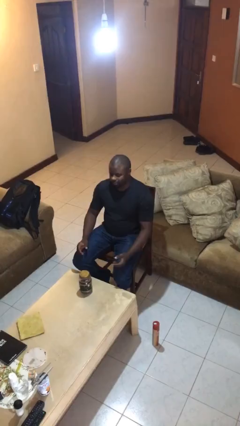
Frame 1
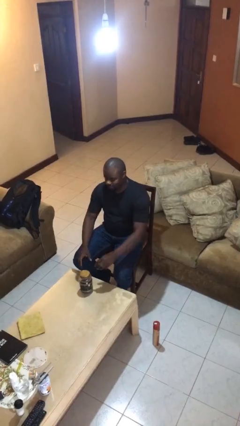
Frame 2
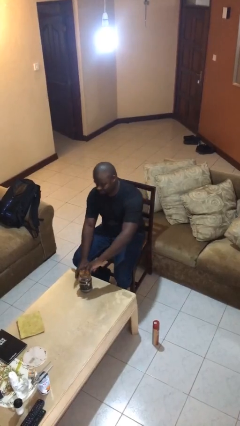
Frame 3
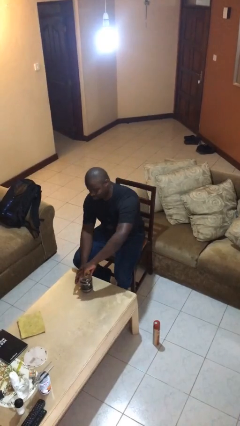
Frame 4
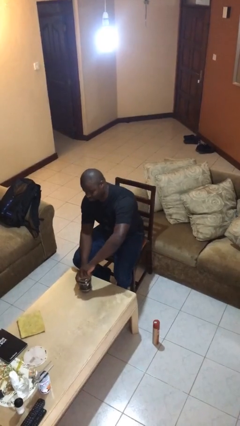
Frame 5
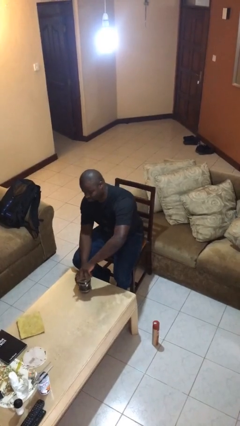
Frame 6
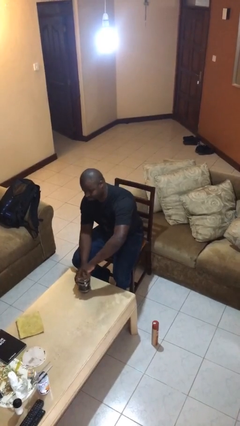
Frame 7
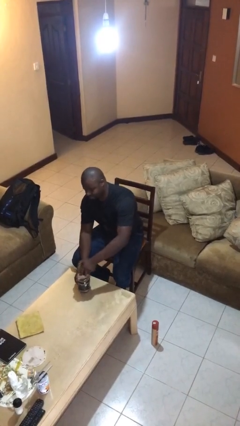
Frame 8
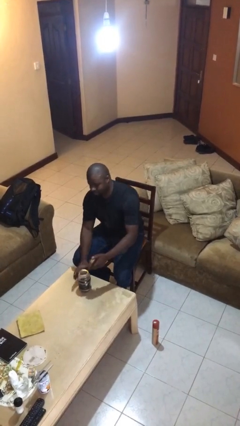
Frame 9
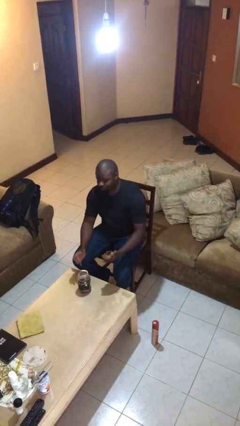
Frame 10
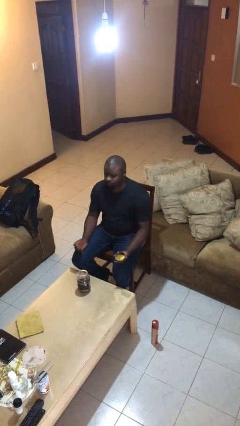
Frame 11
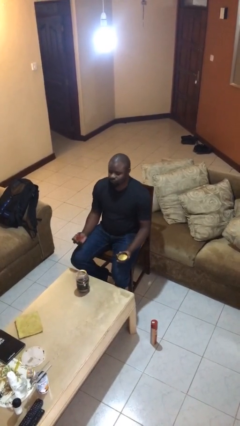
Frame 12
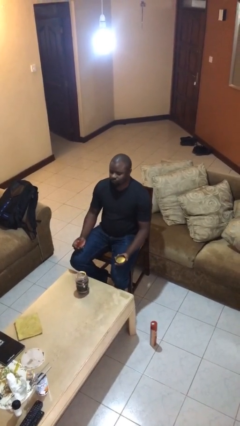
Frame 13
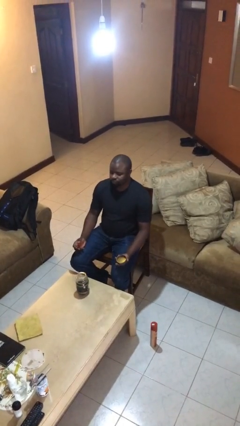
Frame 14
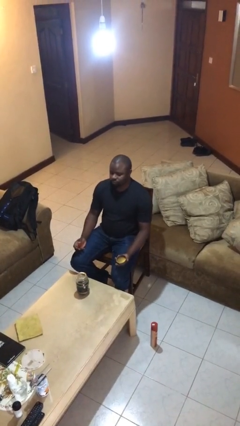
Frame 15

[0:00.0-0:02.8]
person opens jar

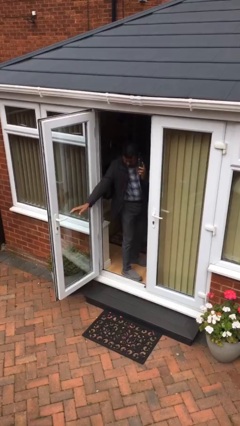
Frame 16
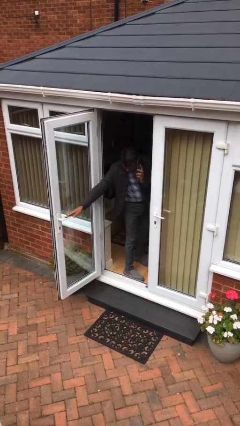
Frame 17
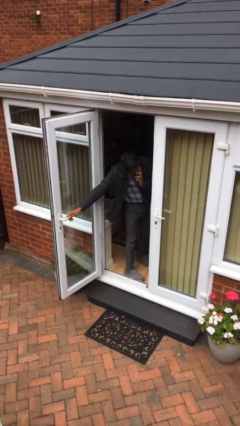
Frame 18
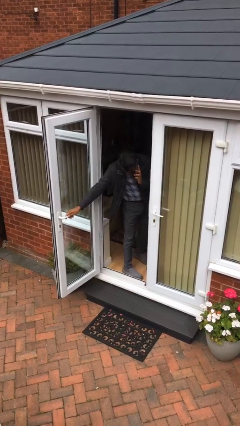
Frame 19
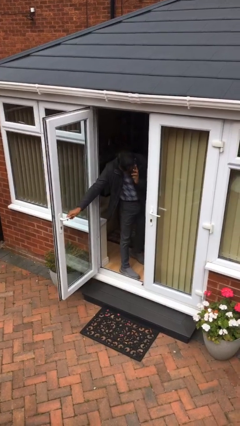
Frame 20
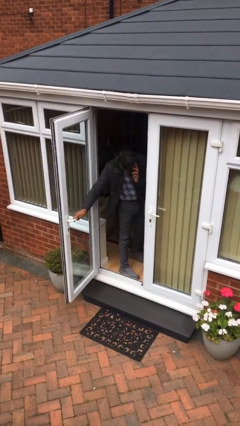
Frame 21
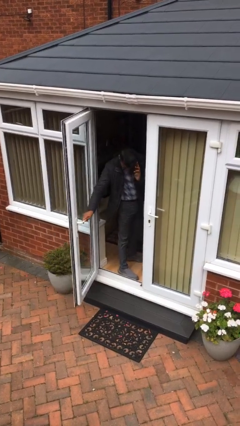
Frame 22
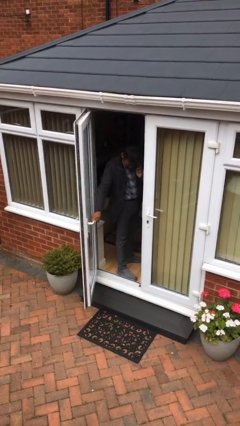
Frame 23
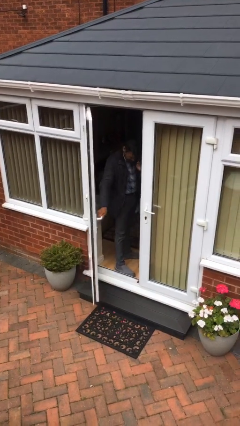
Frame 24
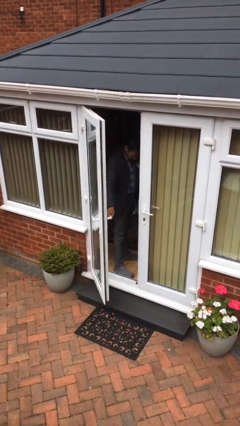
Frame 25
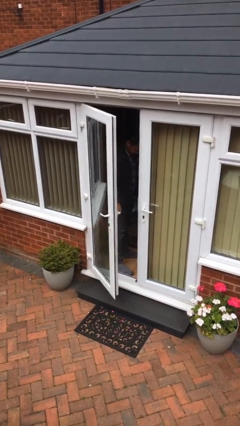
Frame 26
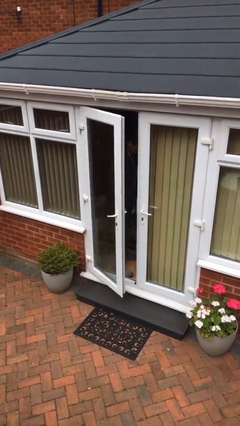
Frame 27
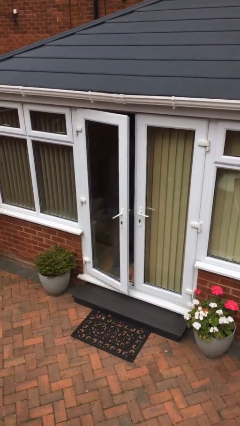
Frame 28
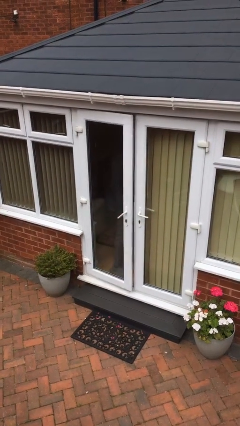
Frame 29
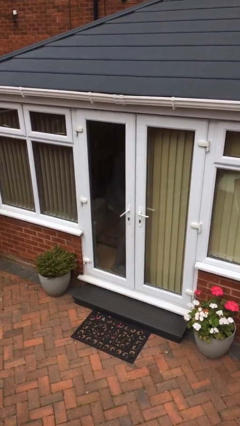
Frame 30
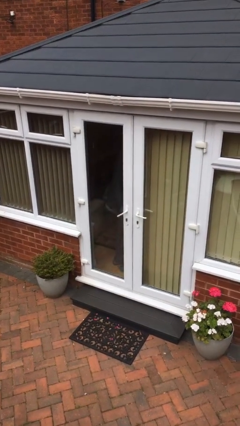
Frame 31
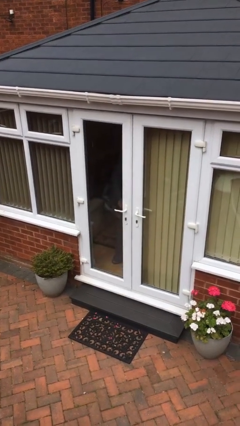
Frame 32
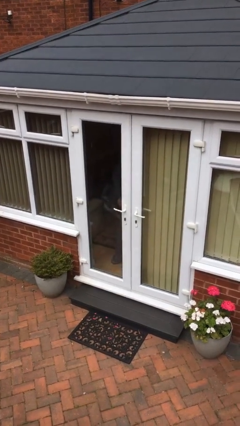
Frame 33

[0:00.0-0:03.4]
person closes facility door

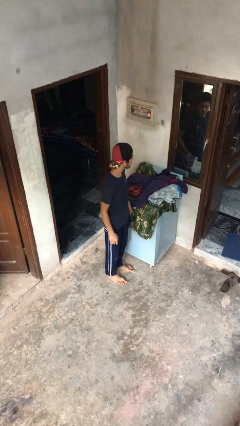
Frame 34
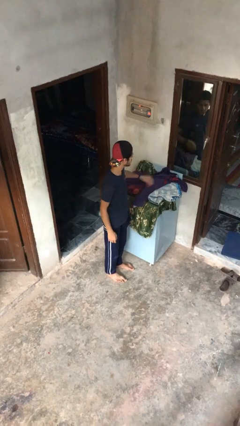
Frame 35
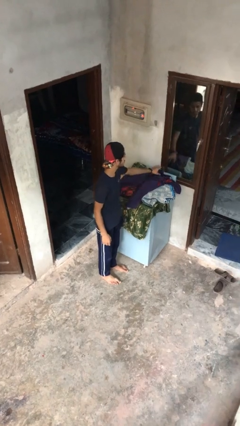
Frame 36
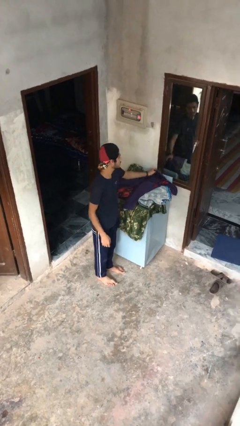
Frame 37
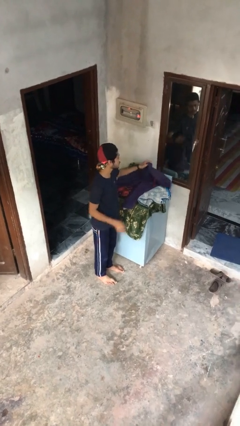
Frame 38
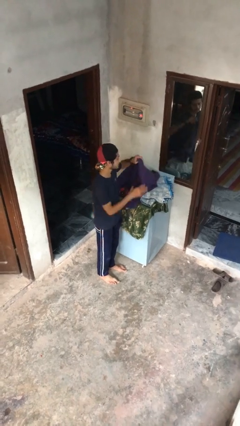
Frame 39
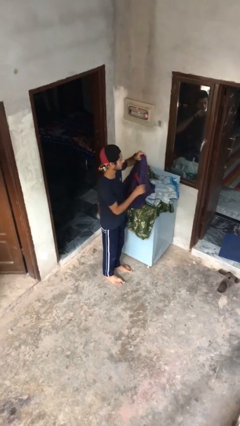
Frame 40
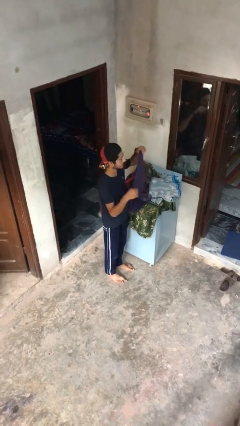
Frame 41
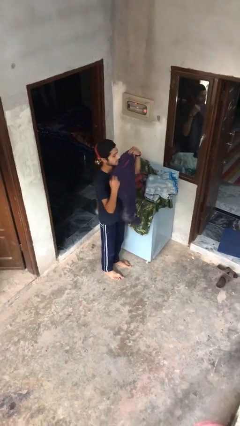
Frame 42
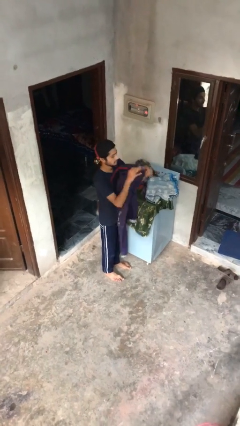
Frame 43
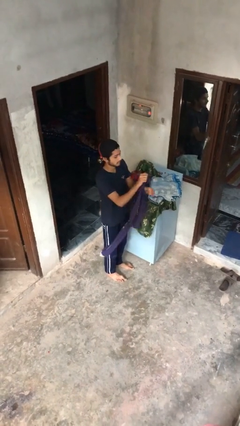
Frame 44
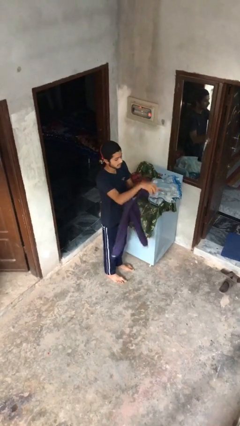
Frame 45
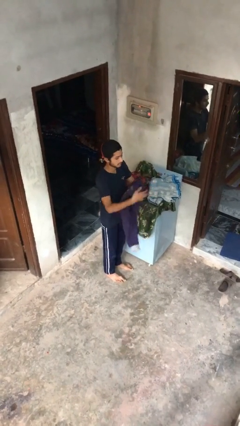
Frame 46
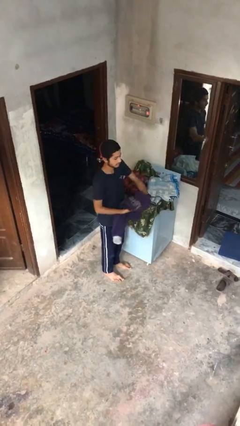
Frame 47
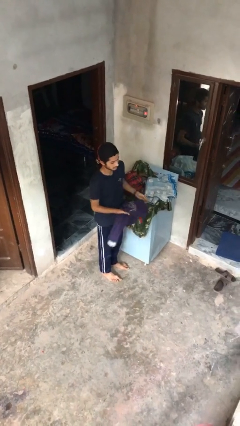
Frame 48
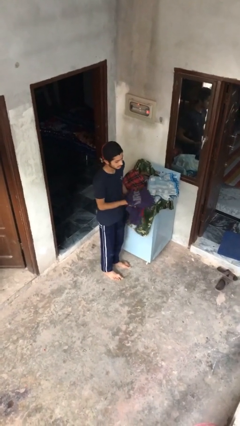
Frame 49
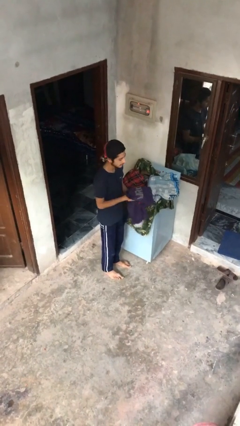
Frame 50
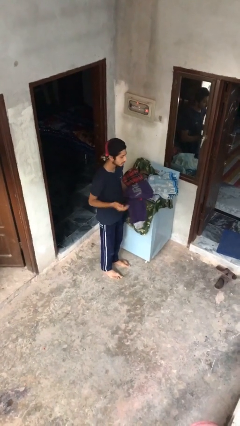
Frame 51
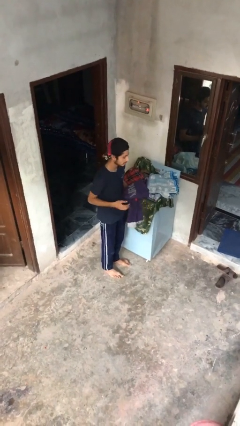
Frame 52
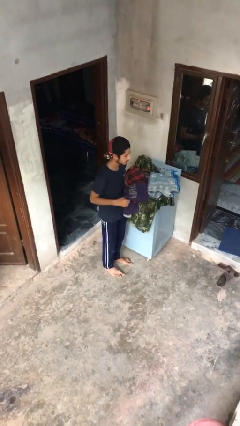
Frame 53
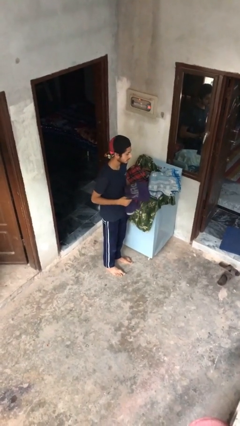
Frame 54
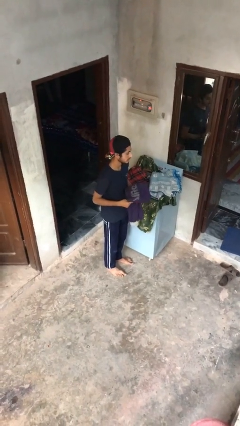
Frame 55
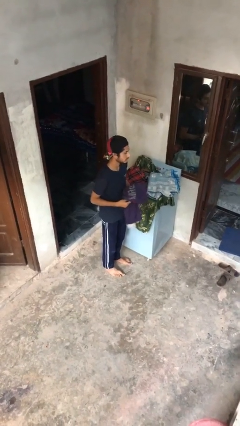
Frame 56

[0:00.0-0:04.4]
person folds pants

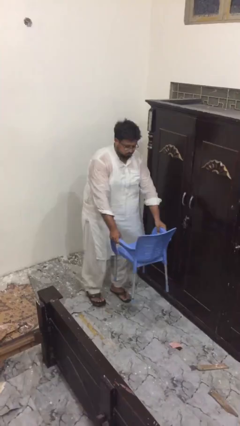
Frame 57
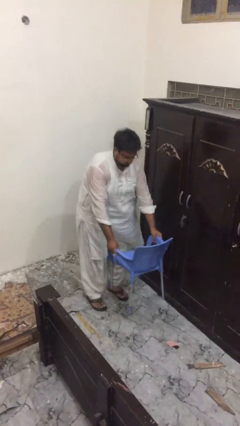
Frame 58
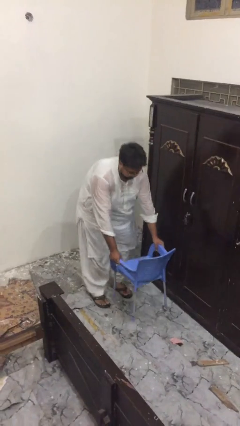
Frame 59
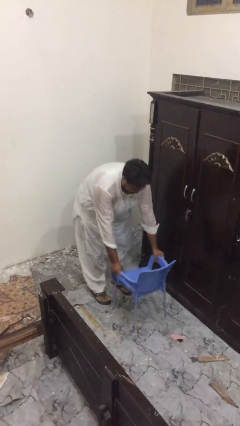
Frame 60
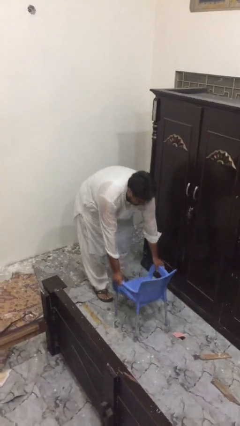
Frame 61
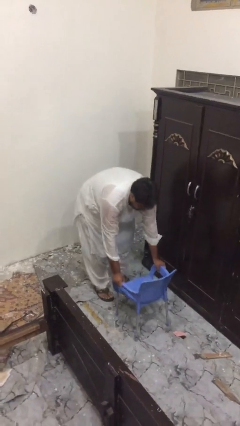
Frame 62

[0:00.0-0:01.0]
person puts down object on floor

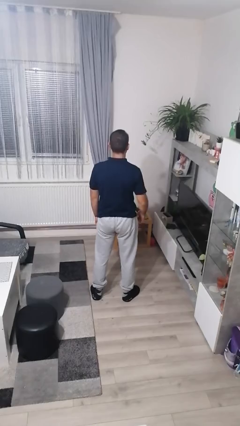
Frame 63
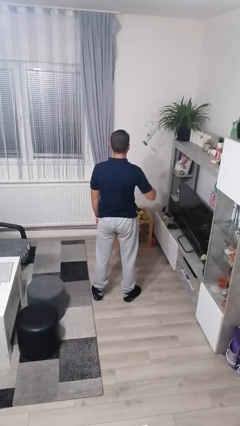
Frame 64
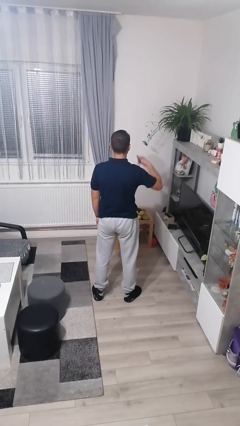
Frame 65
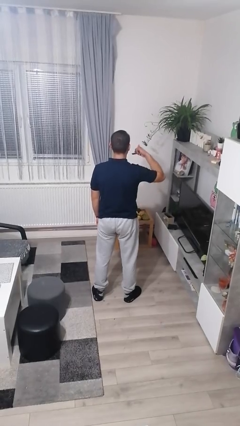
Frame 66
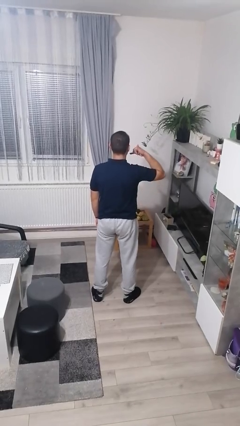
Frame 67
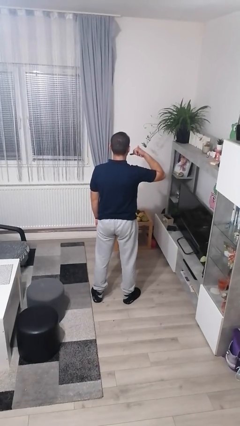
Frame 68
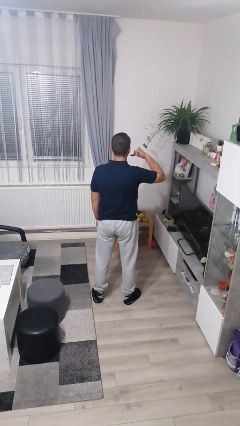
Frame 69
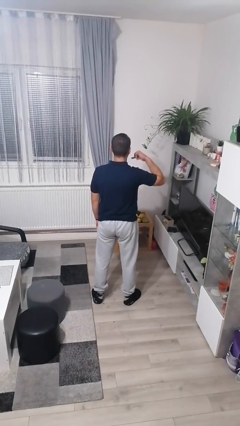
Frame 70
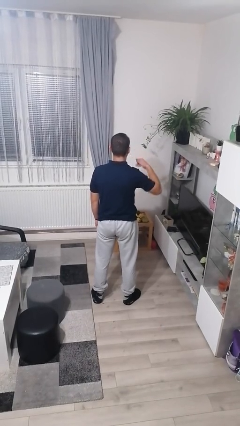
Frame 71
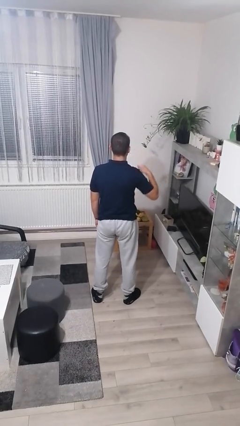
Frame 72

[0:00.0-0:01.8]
person gestures call me

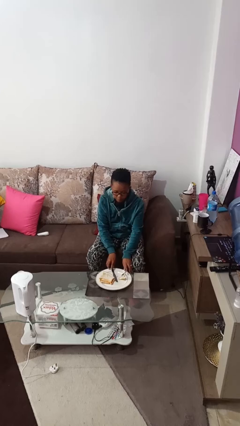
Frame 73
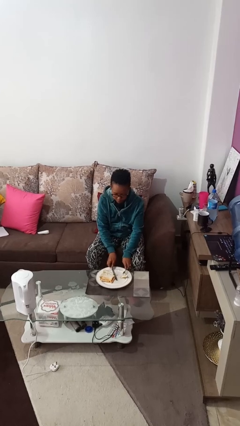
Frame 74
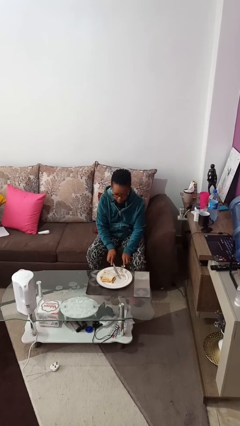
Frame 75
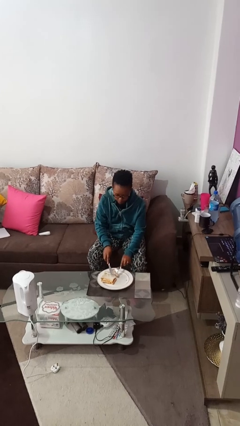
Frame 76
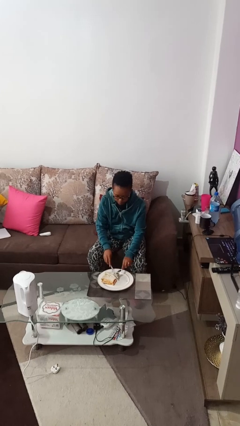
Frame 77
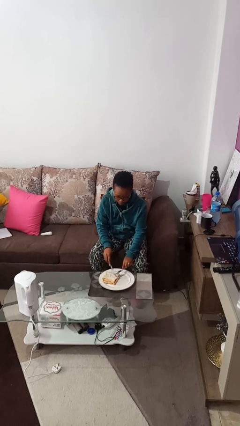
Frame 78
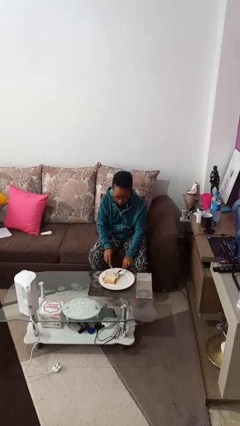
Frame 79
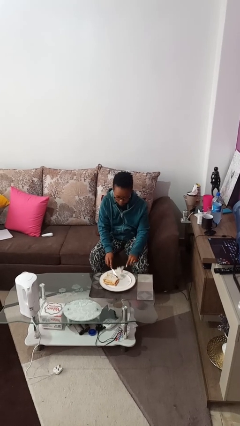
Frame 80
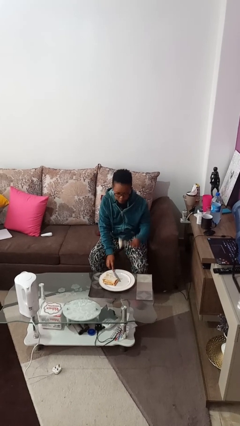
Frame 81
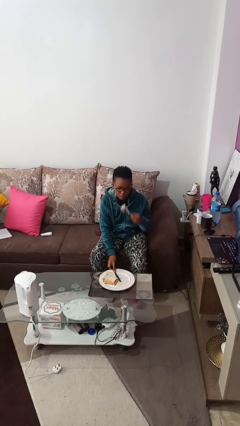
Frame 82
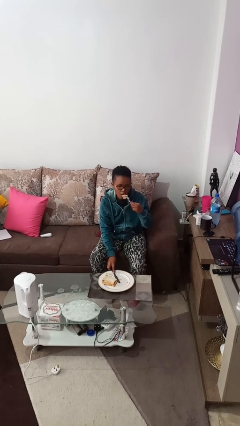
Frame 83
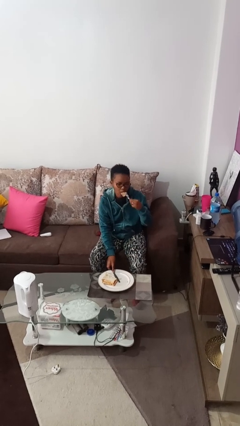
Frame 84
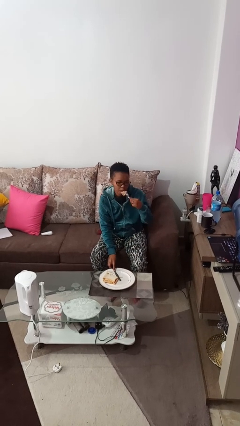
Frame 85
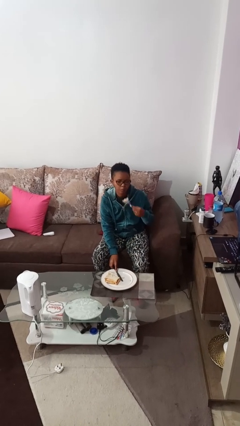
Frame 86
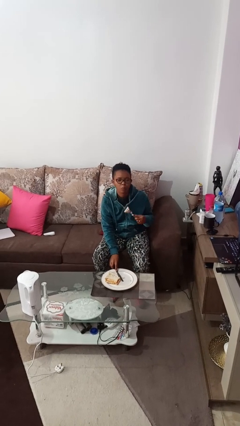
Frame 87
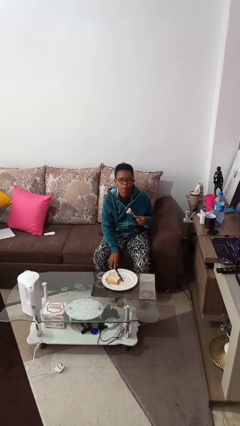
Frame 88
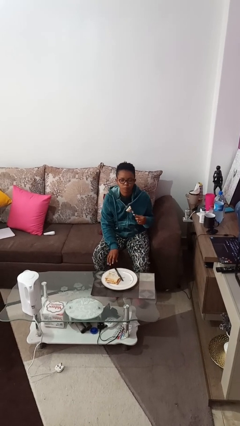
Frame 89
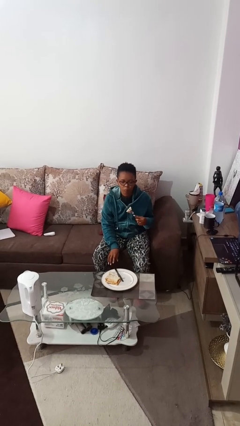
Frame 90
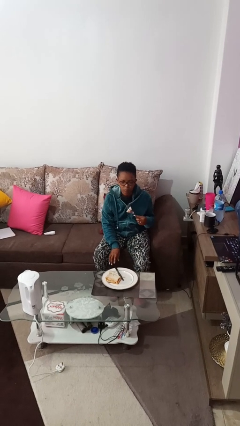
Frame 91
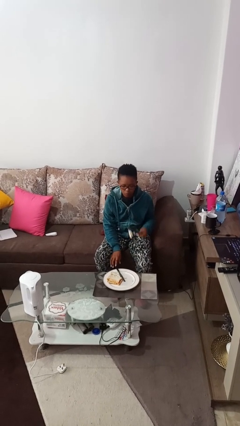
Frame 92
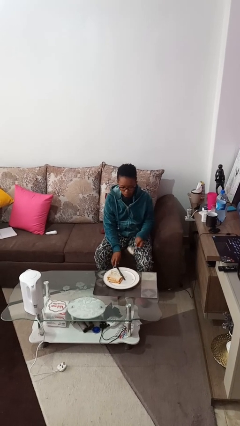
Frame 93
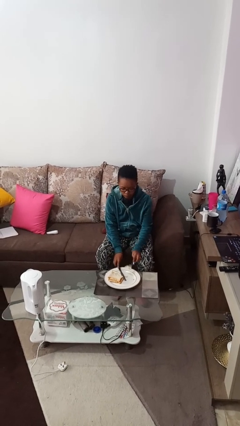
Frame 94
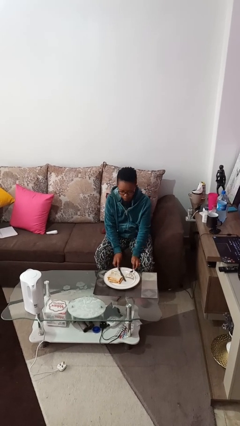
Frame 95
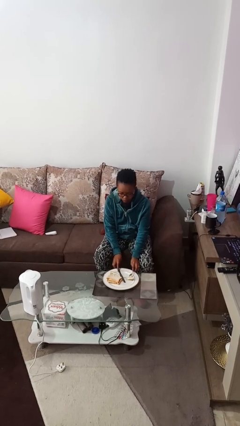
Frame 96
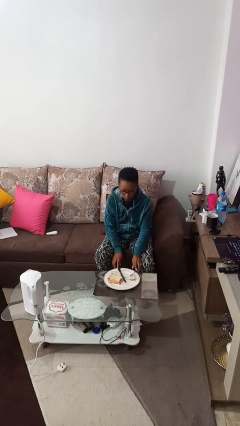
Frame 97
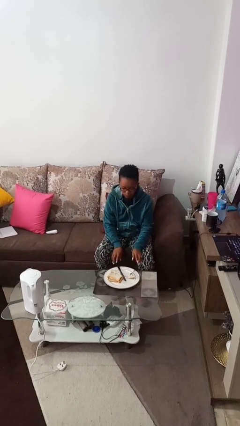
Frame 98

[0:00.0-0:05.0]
person eats with utensil
